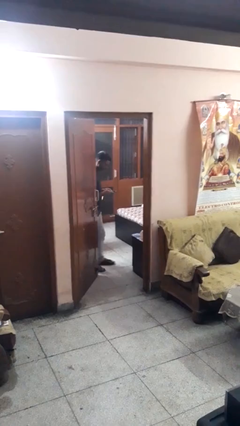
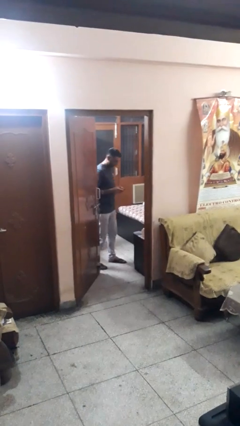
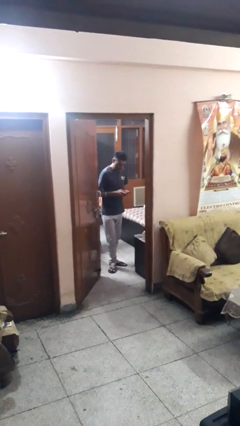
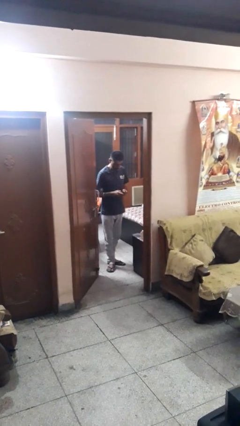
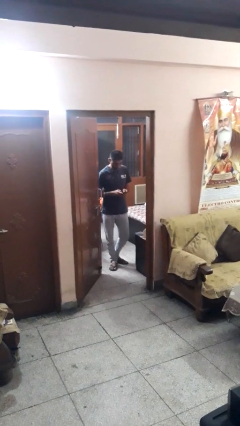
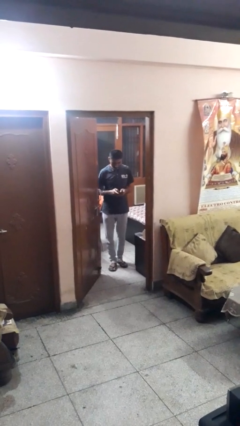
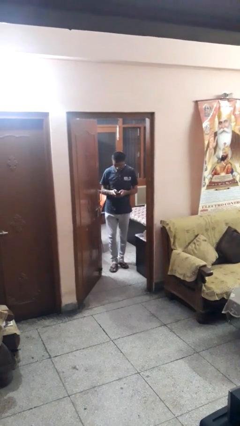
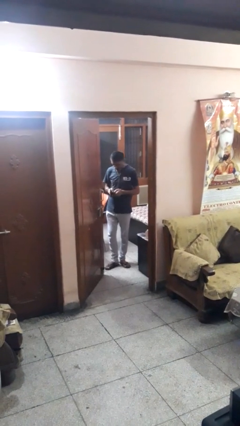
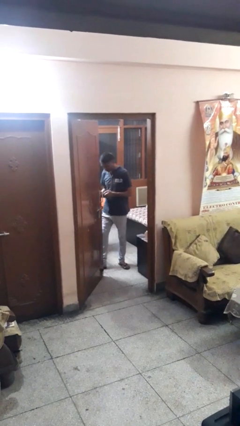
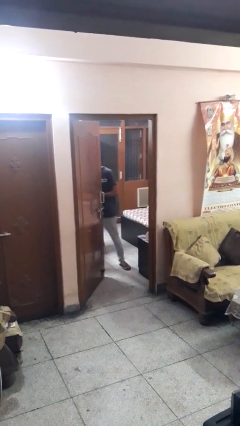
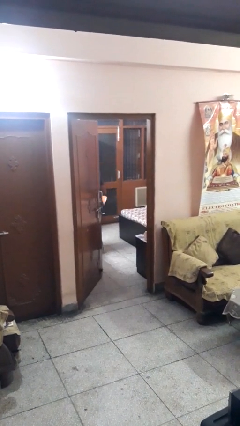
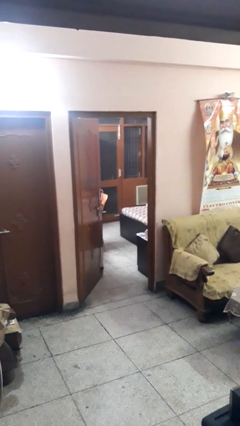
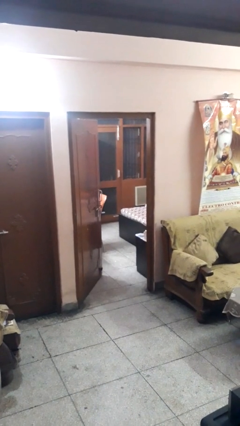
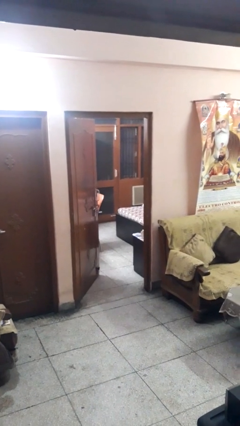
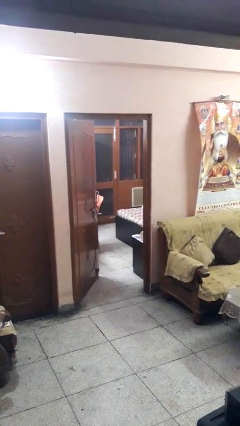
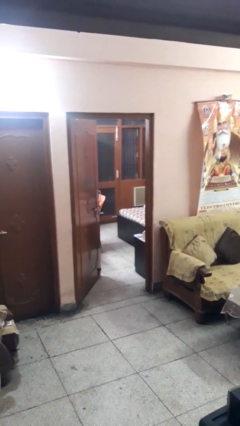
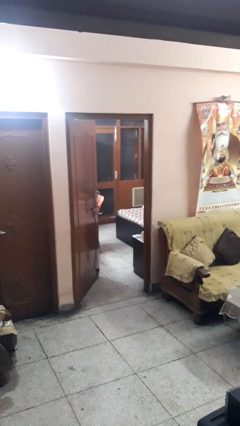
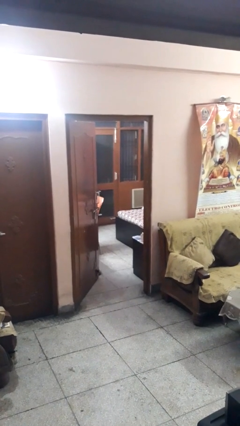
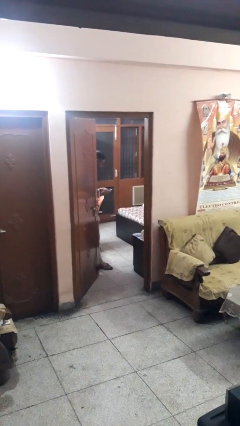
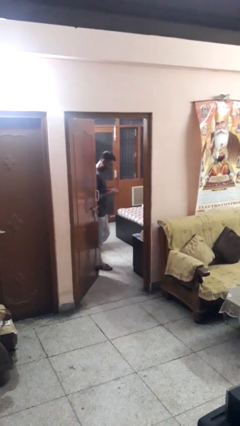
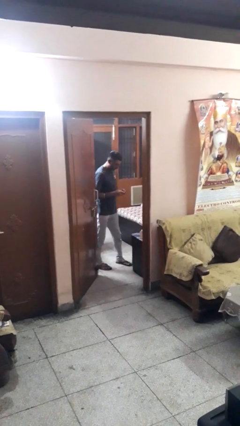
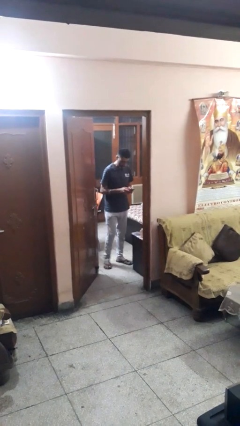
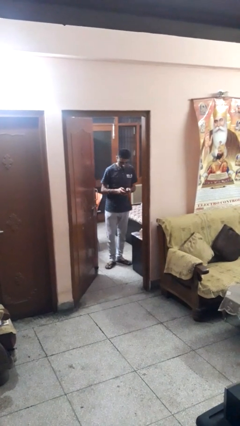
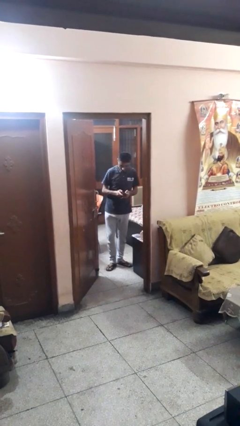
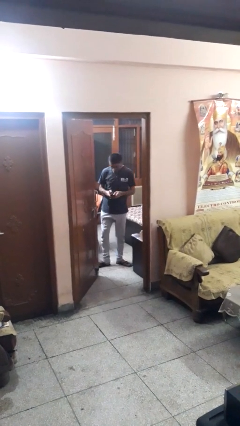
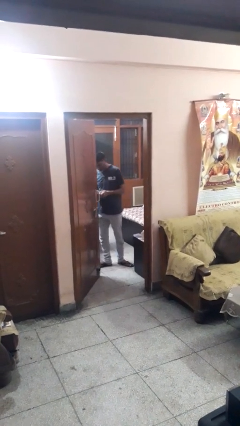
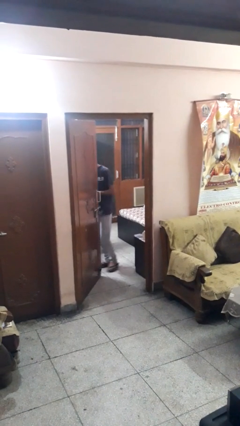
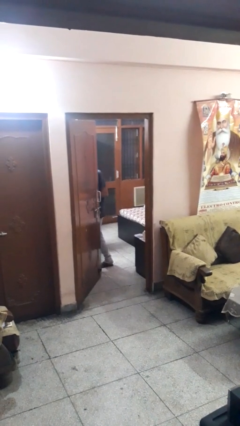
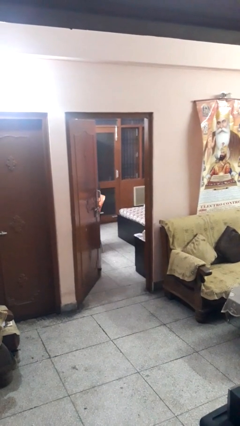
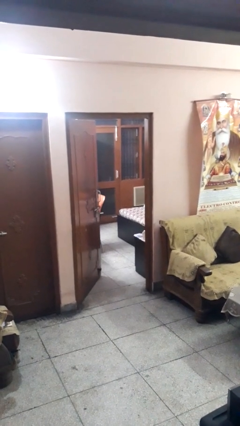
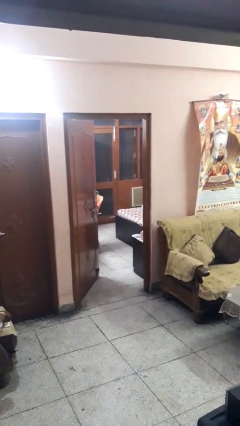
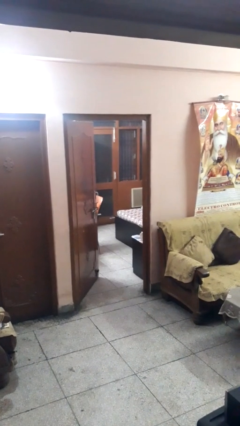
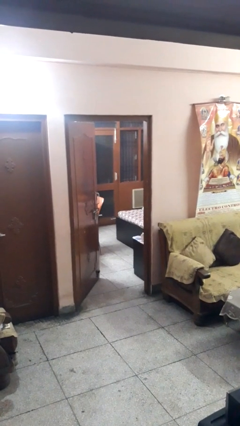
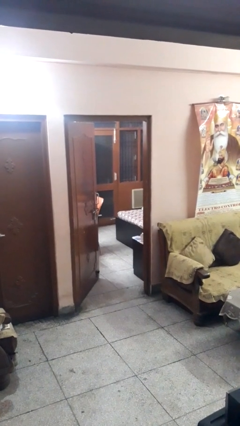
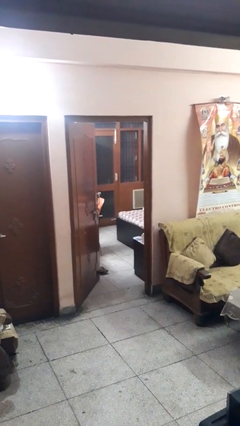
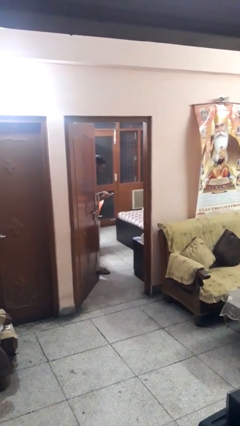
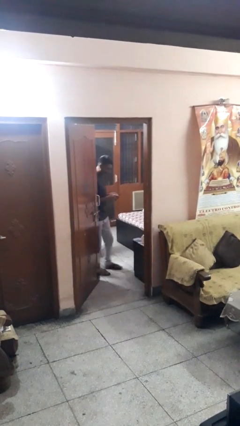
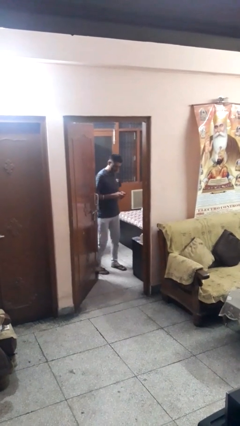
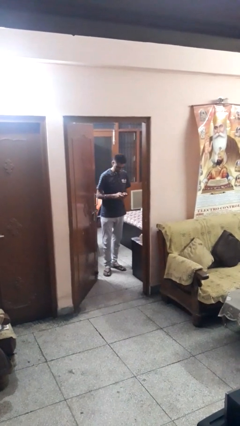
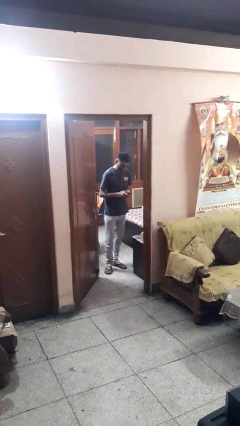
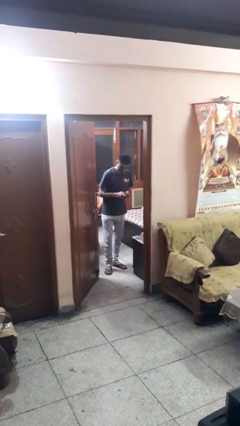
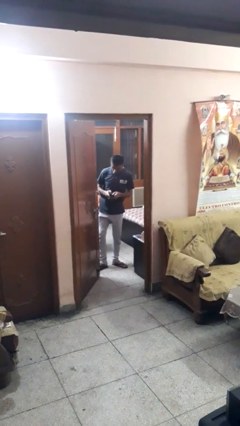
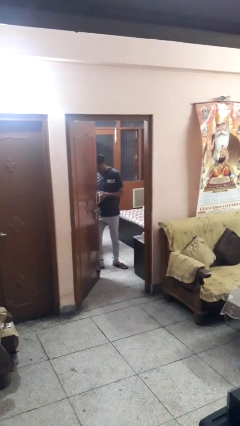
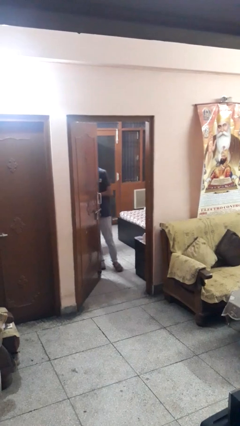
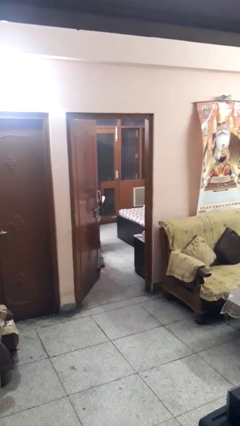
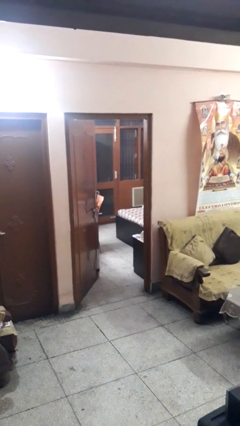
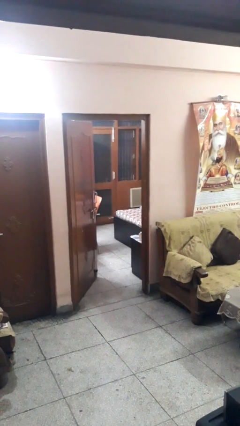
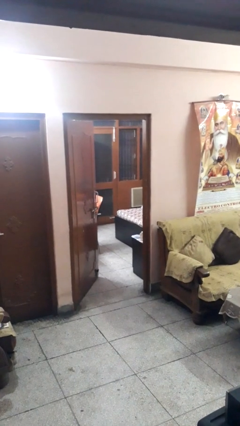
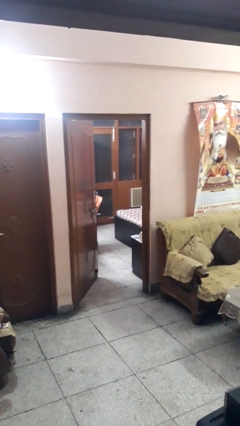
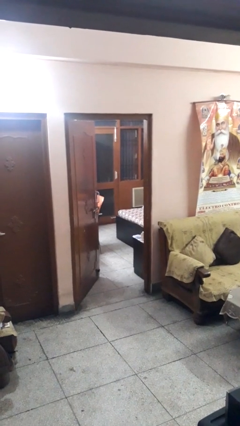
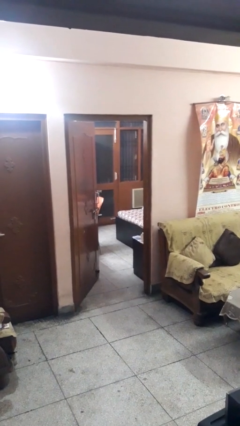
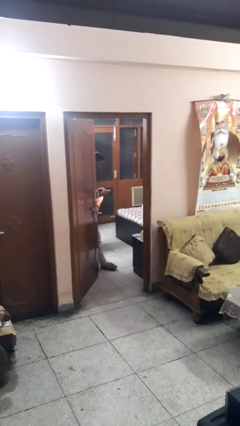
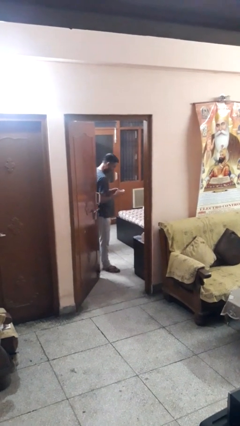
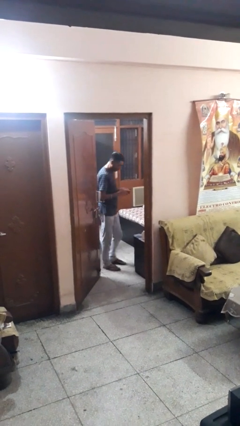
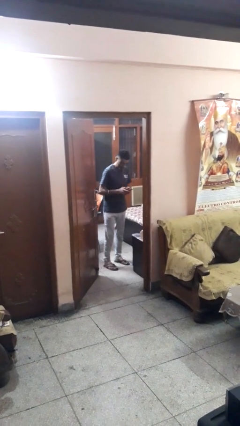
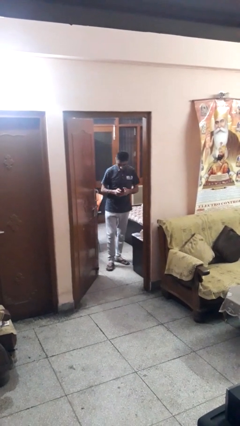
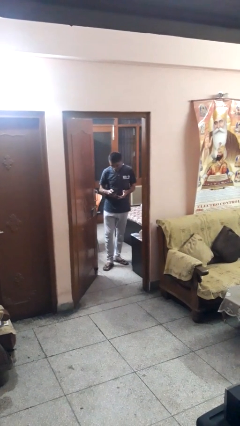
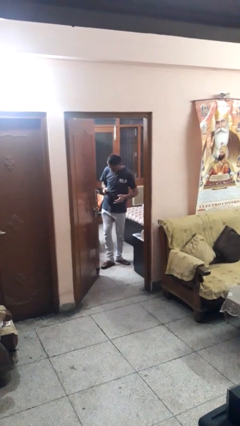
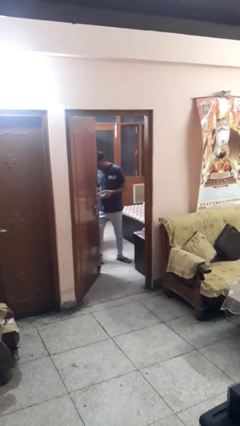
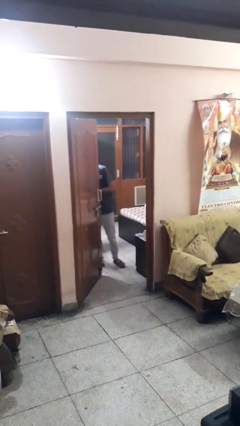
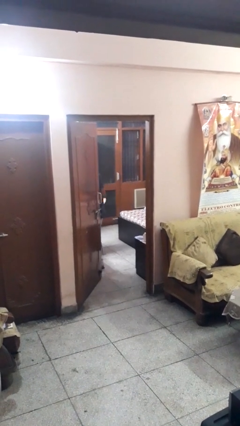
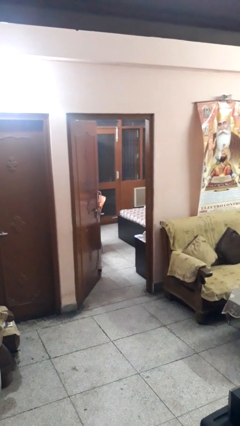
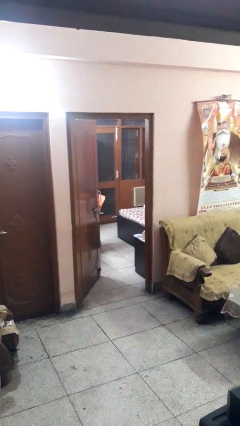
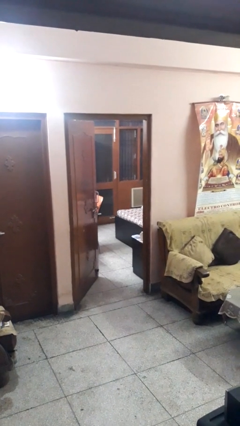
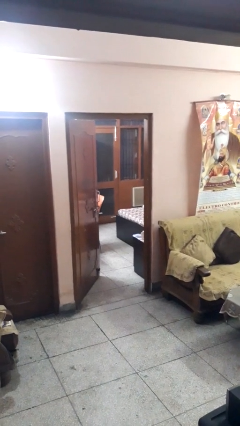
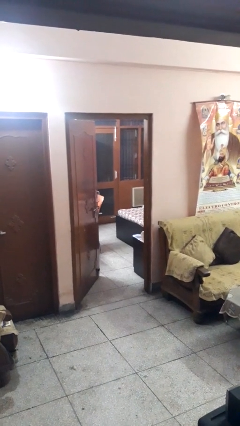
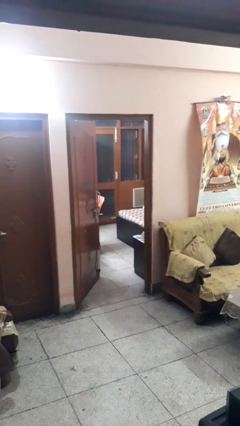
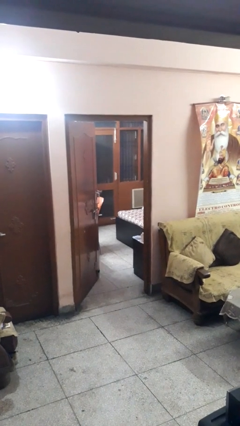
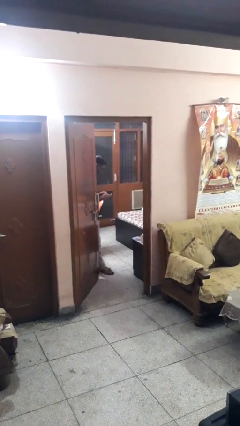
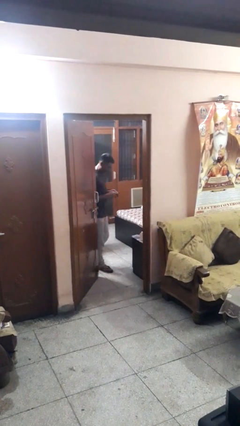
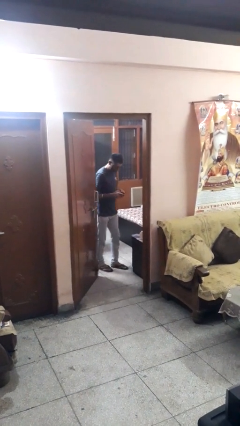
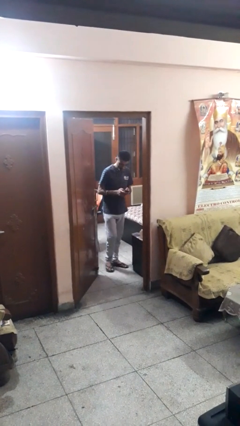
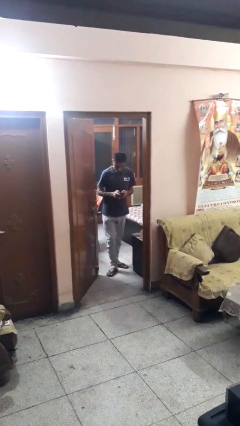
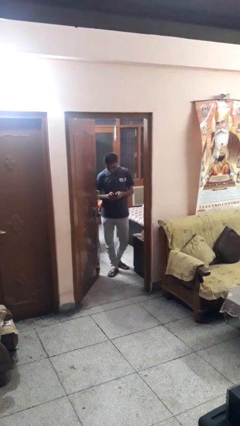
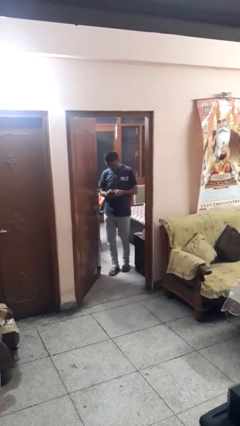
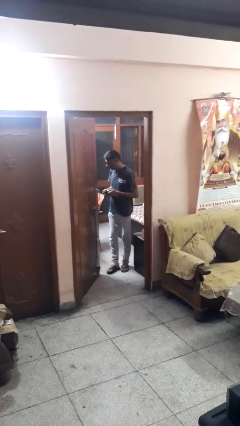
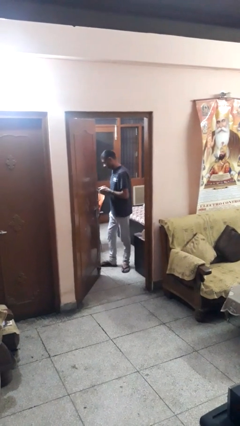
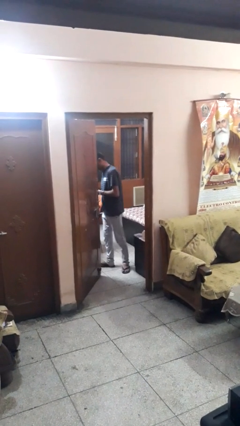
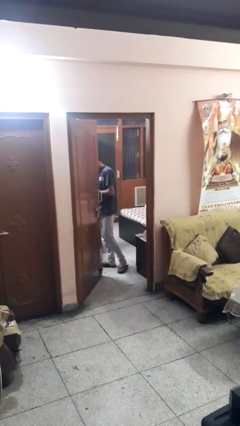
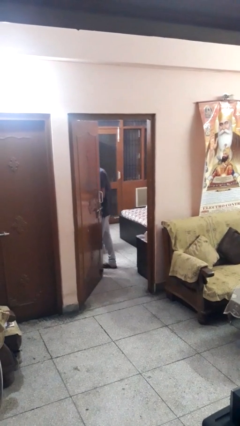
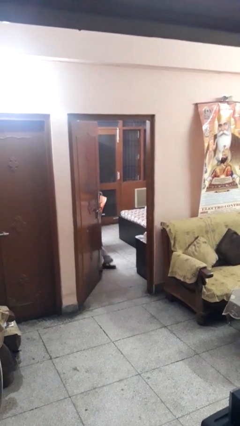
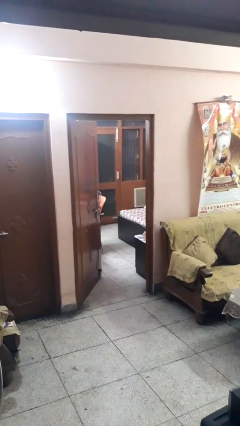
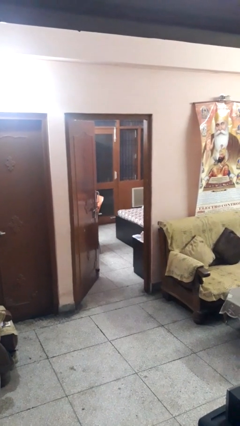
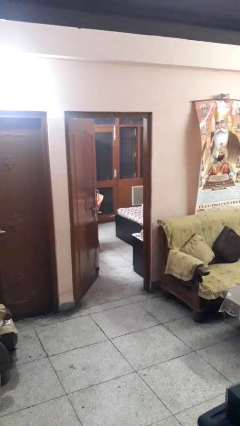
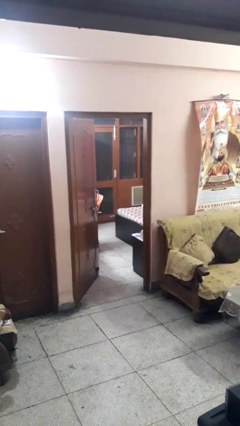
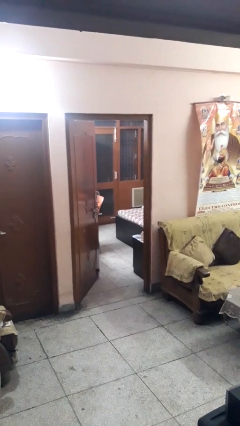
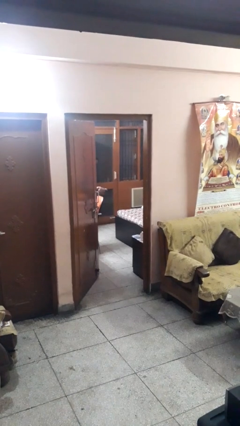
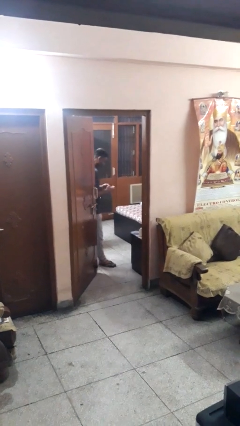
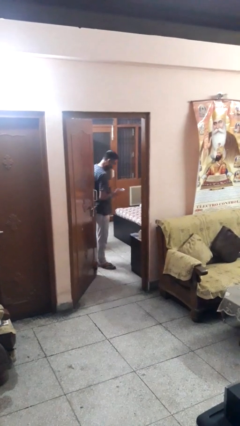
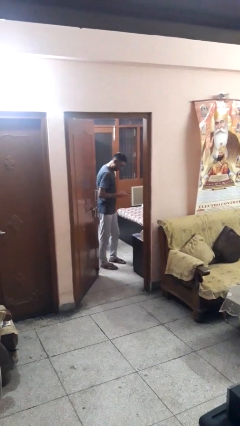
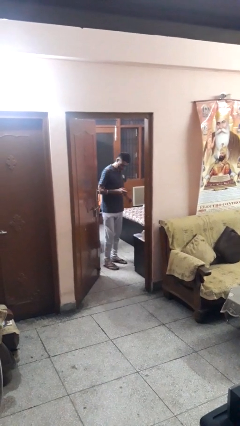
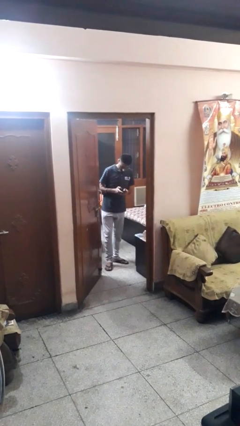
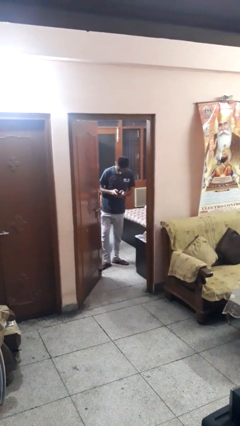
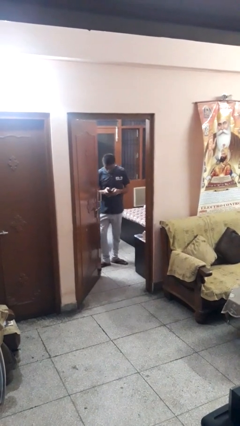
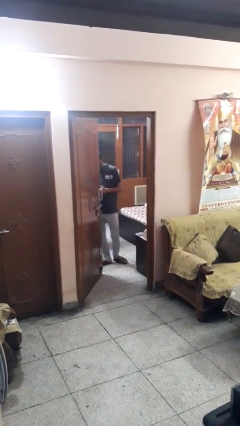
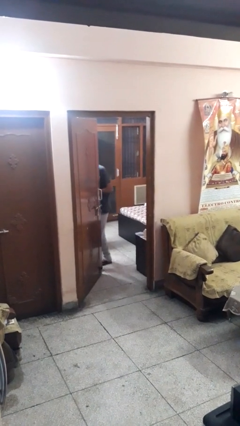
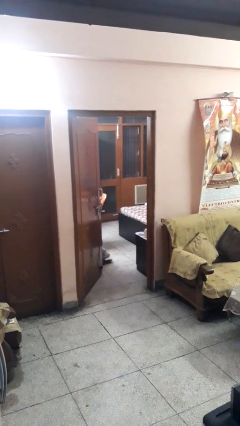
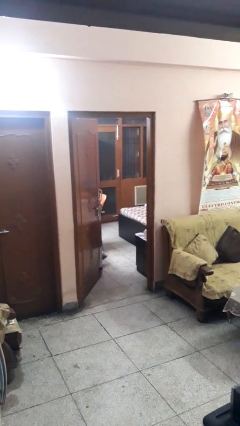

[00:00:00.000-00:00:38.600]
person texts on phone
